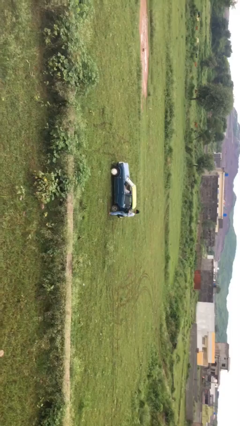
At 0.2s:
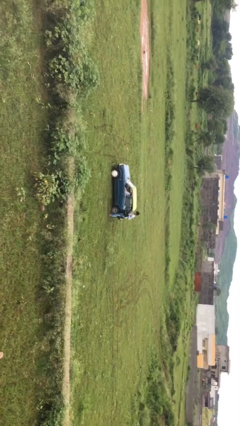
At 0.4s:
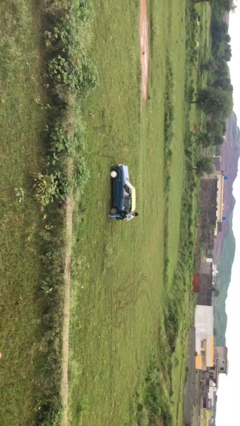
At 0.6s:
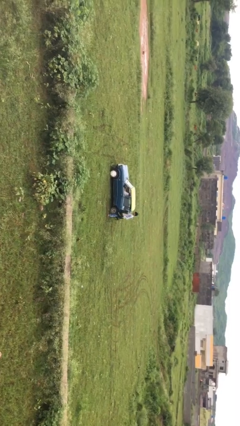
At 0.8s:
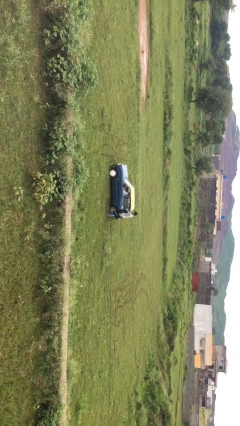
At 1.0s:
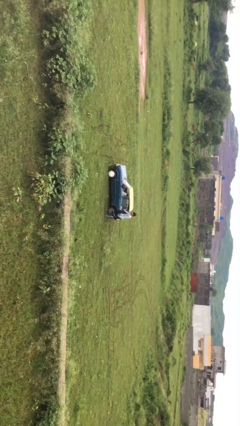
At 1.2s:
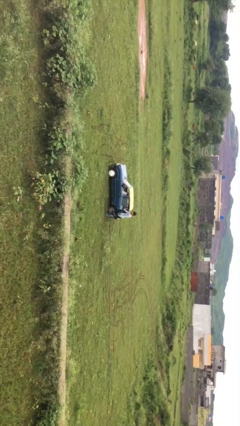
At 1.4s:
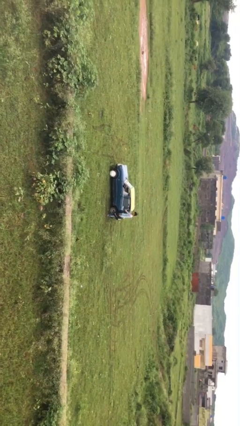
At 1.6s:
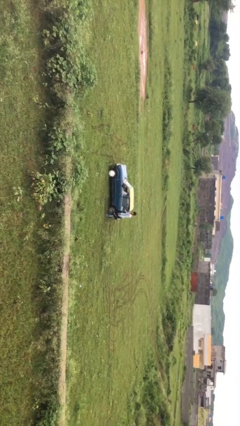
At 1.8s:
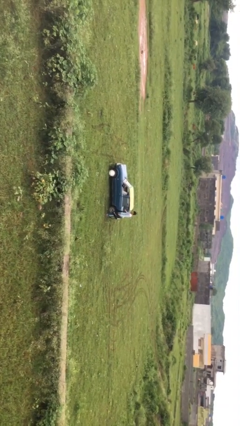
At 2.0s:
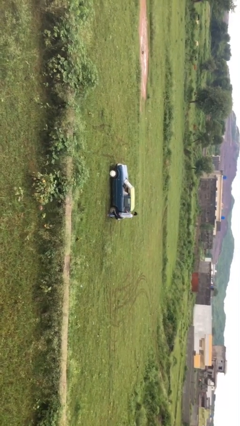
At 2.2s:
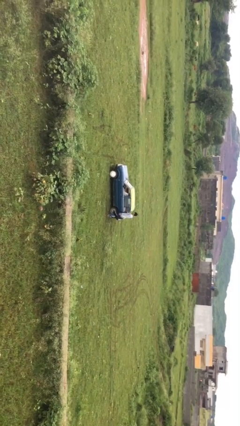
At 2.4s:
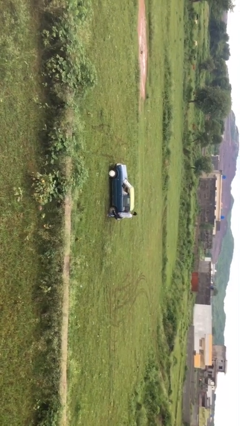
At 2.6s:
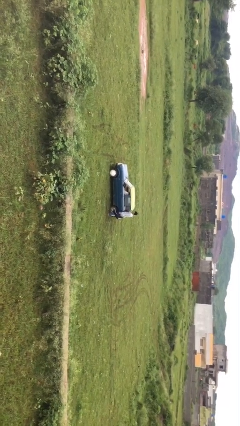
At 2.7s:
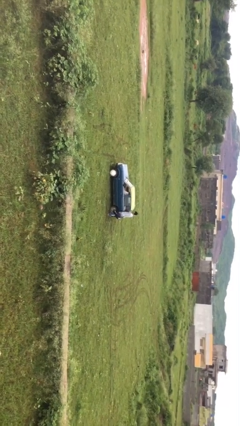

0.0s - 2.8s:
person closes car door

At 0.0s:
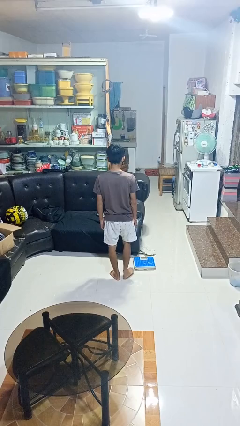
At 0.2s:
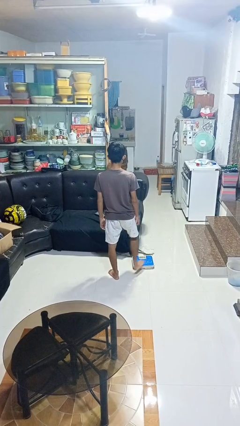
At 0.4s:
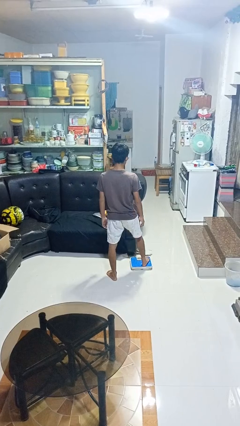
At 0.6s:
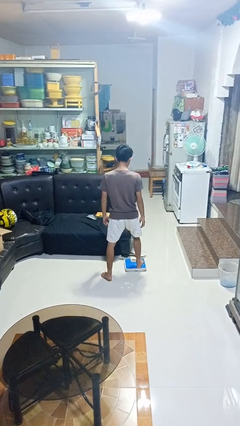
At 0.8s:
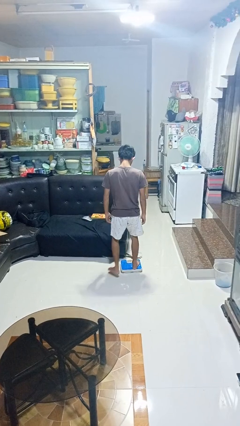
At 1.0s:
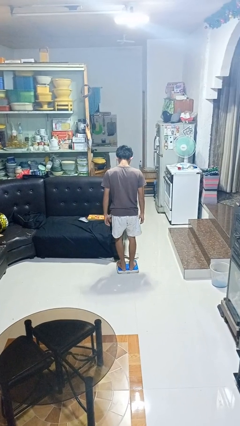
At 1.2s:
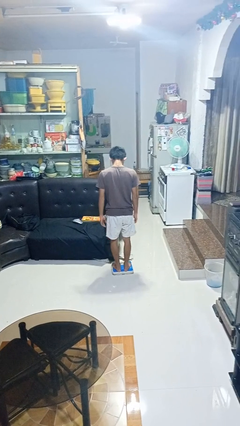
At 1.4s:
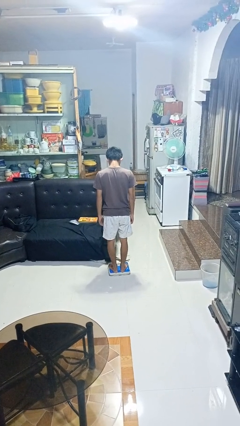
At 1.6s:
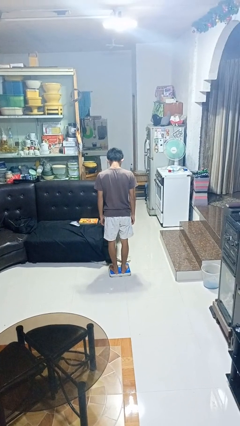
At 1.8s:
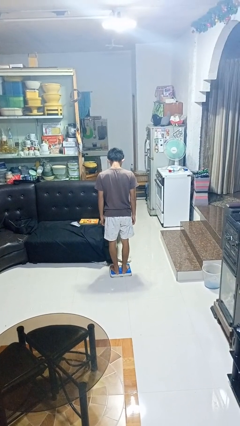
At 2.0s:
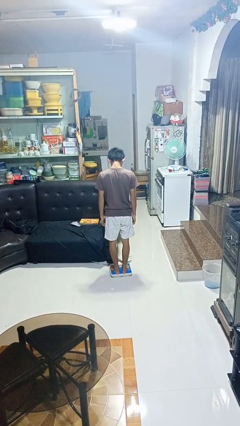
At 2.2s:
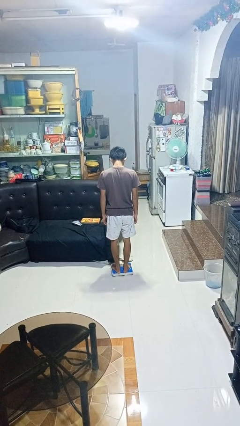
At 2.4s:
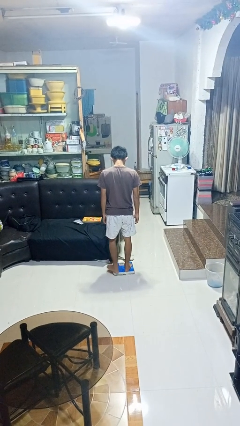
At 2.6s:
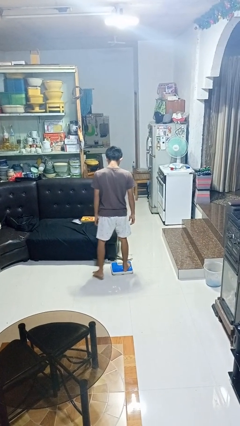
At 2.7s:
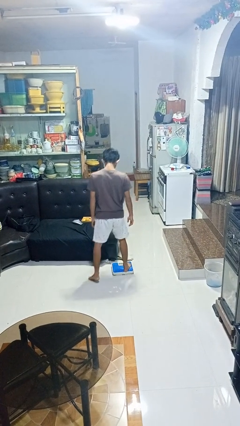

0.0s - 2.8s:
person uses bodyweight scale

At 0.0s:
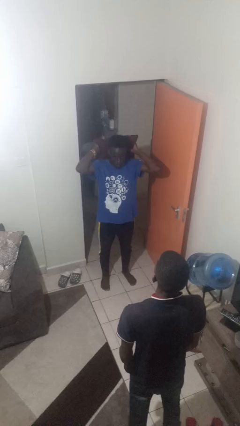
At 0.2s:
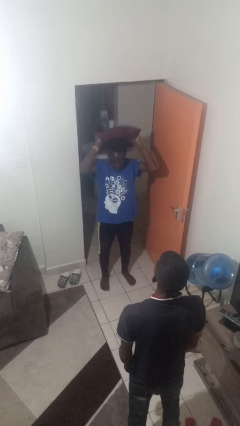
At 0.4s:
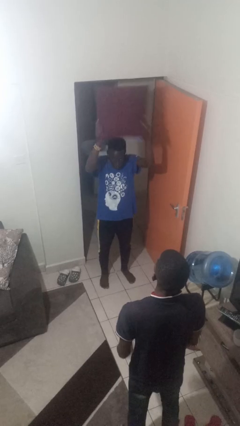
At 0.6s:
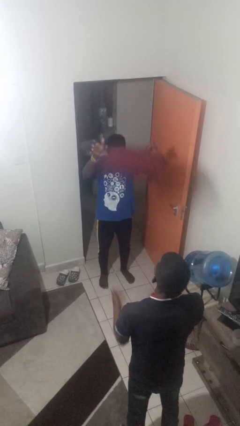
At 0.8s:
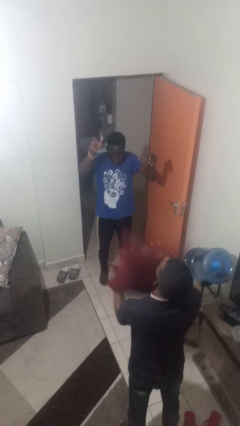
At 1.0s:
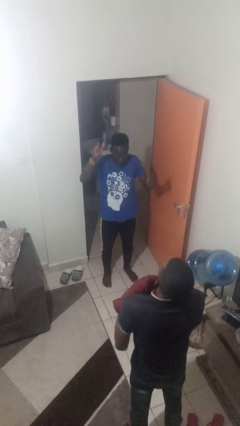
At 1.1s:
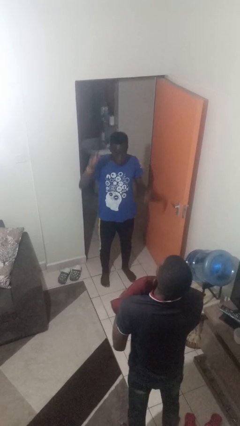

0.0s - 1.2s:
person throws object to person

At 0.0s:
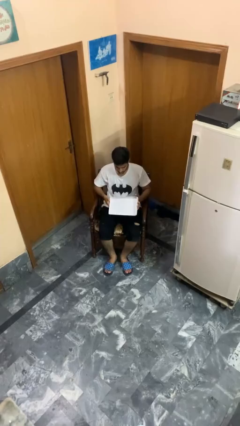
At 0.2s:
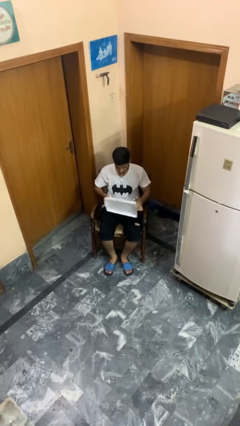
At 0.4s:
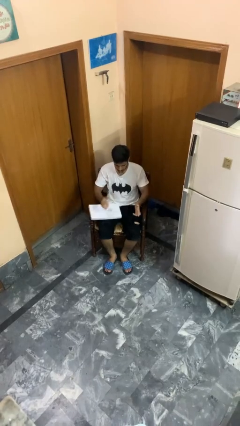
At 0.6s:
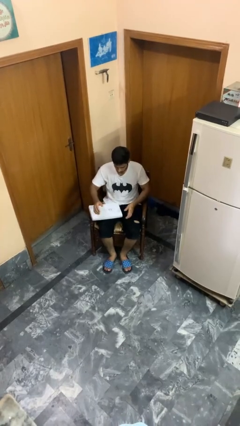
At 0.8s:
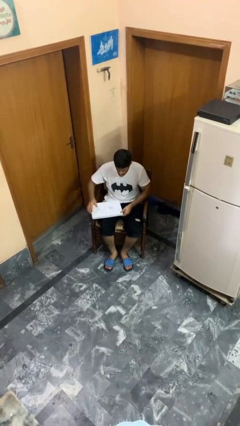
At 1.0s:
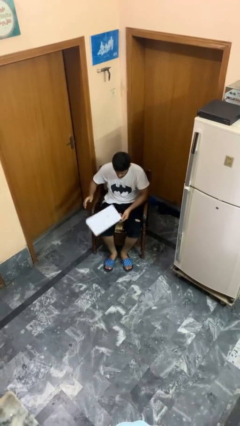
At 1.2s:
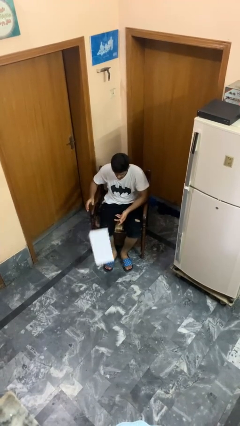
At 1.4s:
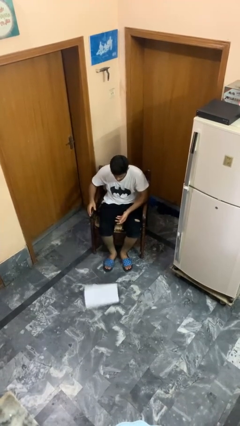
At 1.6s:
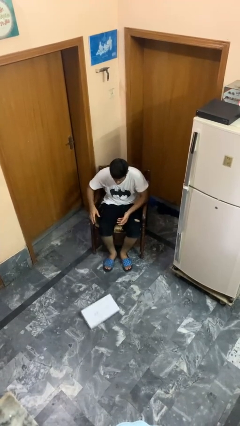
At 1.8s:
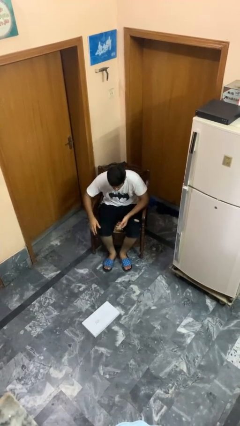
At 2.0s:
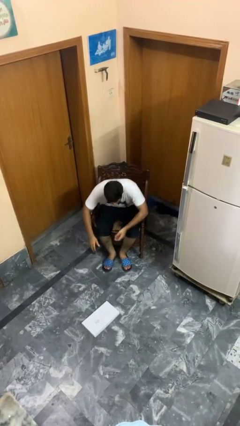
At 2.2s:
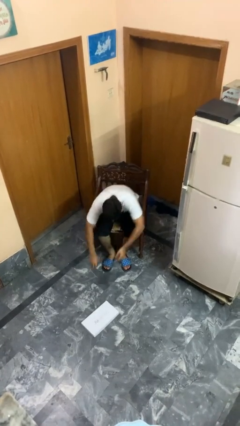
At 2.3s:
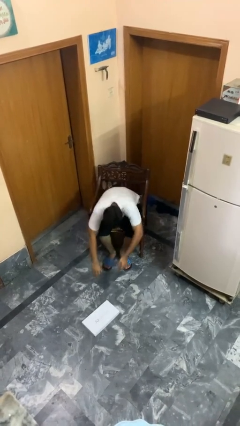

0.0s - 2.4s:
person drops object

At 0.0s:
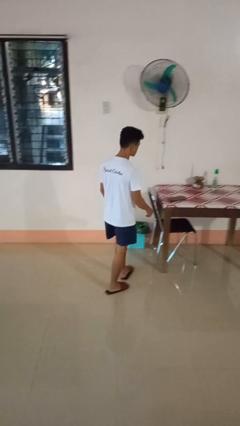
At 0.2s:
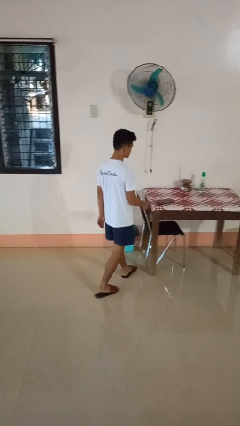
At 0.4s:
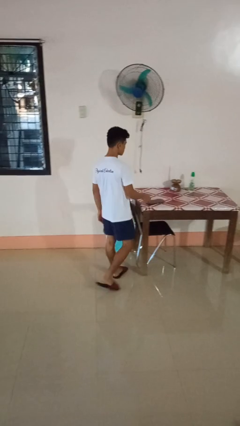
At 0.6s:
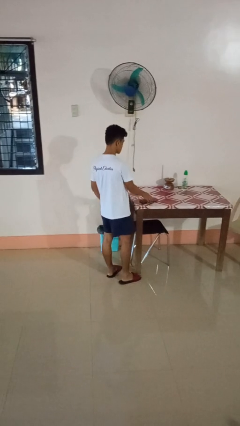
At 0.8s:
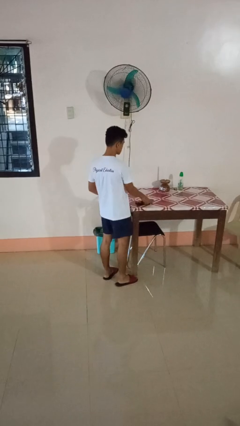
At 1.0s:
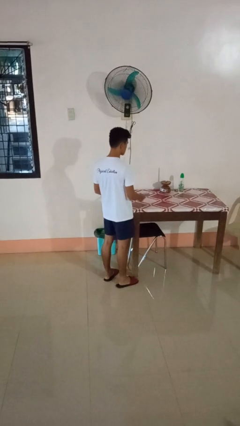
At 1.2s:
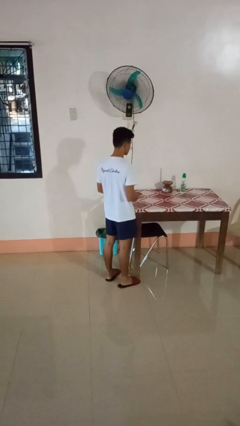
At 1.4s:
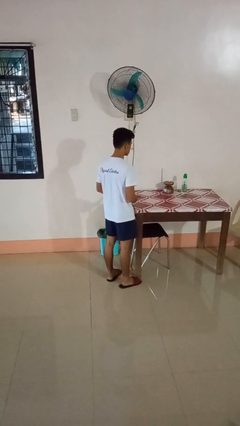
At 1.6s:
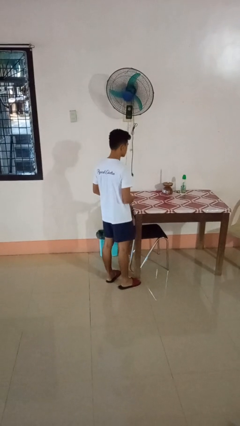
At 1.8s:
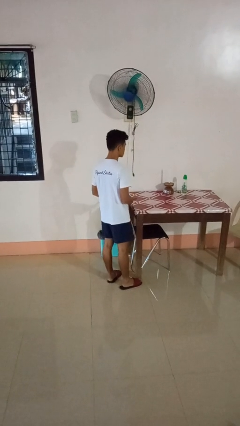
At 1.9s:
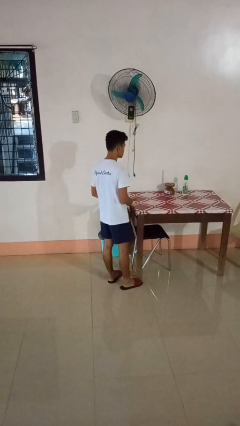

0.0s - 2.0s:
person picks up object from table

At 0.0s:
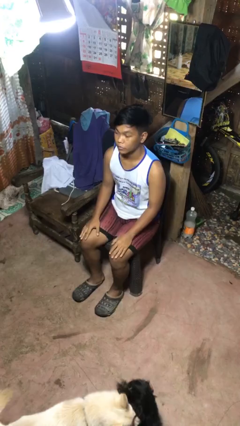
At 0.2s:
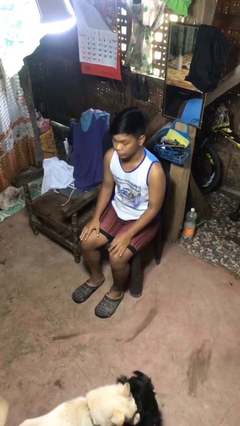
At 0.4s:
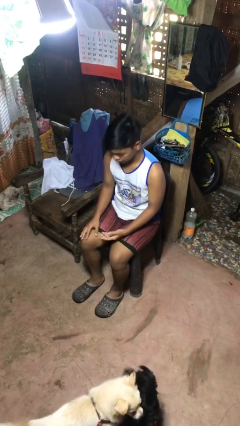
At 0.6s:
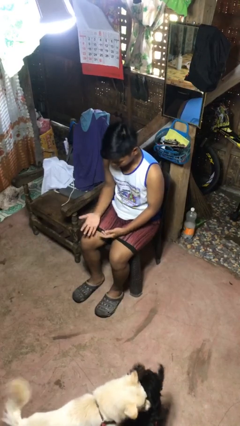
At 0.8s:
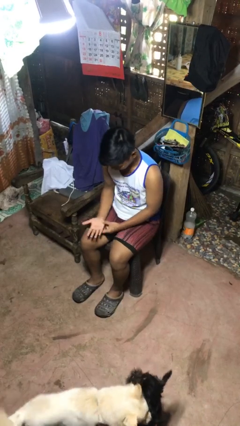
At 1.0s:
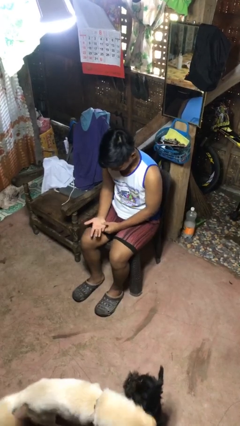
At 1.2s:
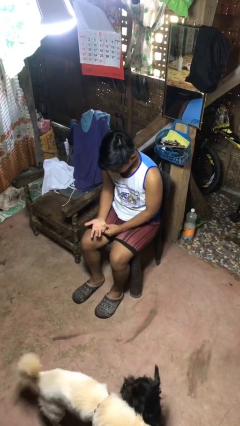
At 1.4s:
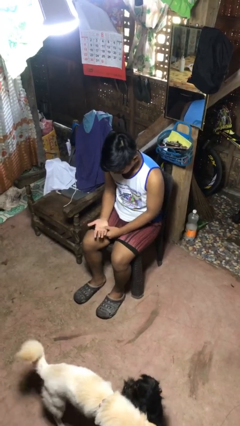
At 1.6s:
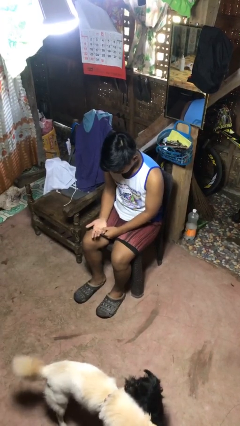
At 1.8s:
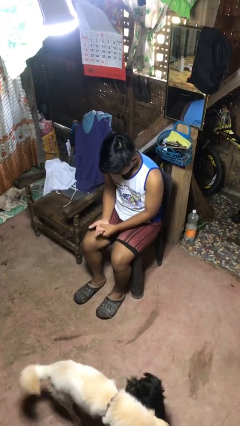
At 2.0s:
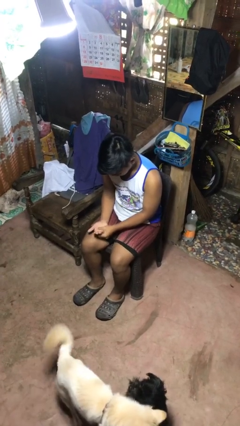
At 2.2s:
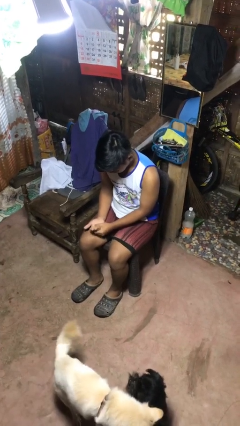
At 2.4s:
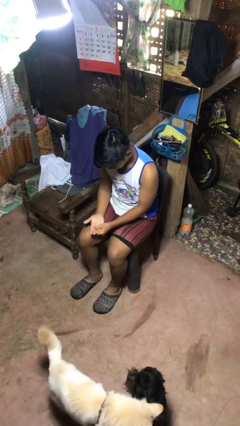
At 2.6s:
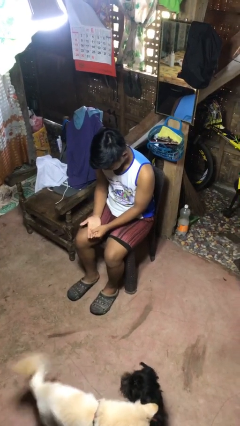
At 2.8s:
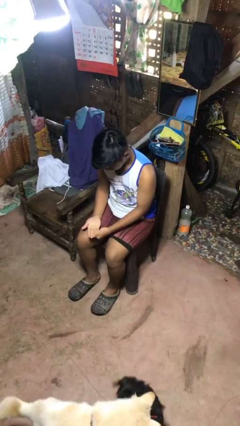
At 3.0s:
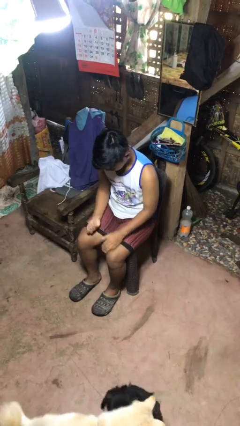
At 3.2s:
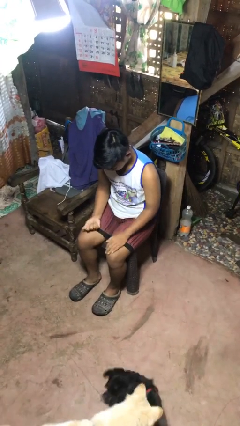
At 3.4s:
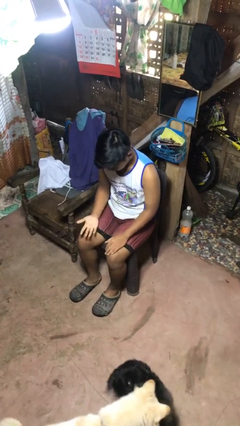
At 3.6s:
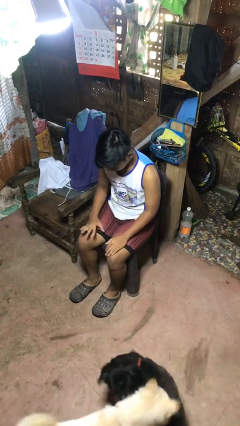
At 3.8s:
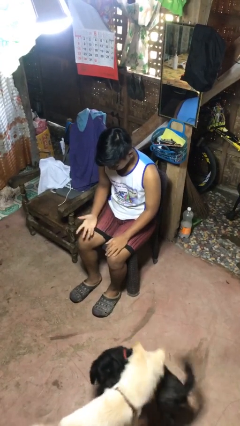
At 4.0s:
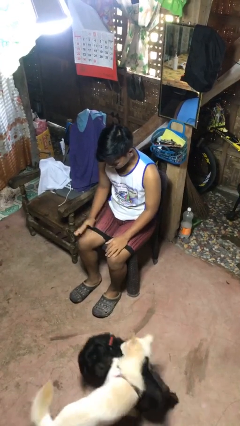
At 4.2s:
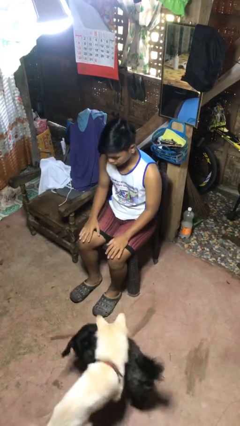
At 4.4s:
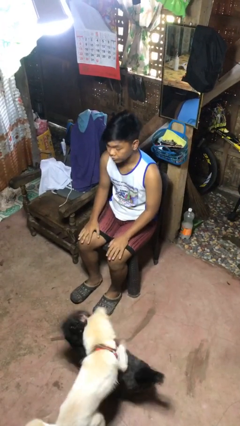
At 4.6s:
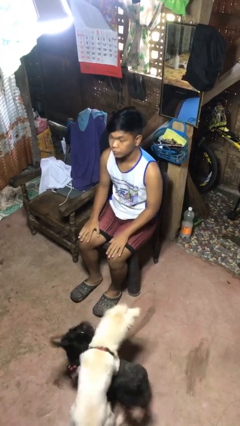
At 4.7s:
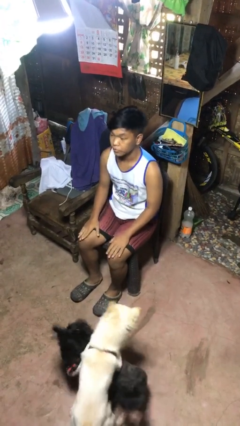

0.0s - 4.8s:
person looks at hands in lap

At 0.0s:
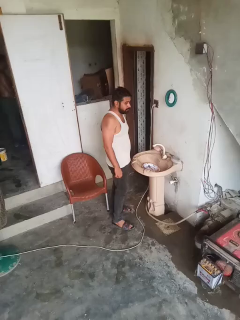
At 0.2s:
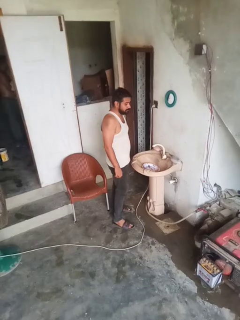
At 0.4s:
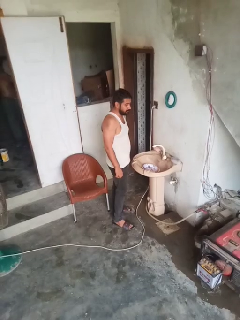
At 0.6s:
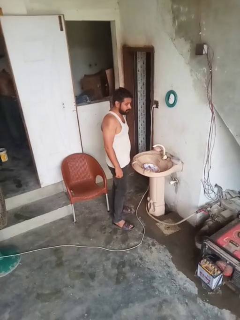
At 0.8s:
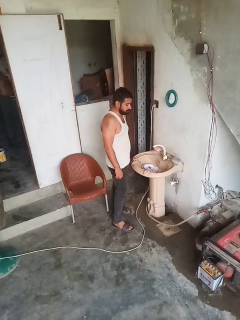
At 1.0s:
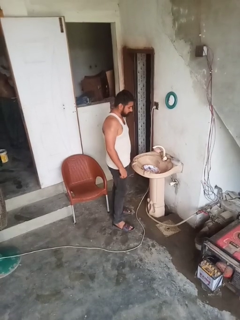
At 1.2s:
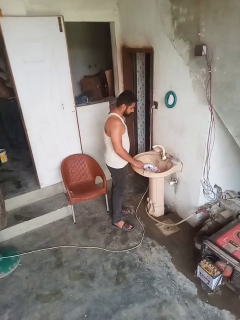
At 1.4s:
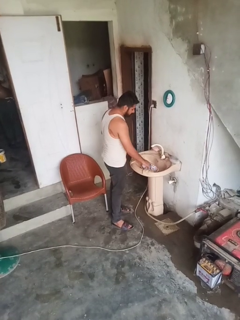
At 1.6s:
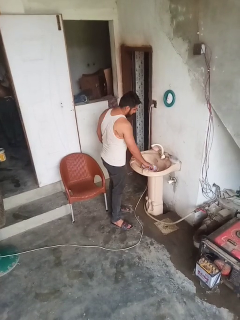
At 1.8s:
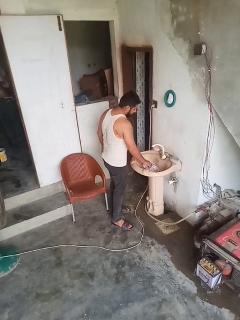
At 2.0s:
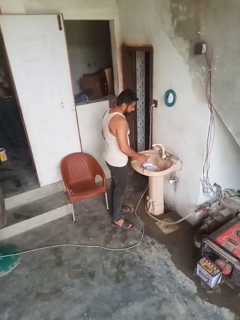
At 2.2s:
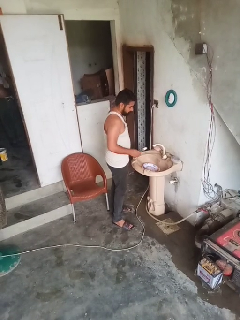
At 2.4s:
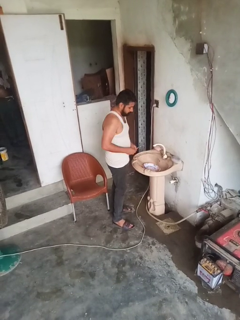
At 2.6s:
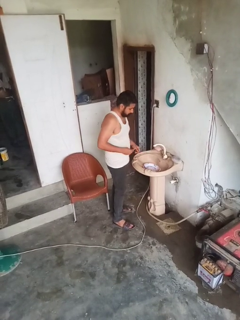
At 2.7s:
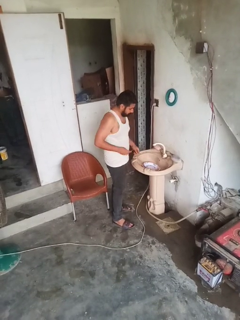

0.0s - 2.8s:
person unloads dishwasher
